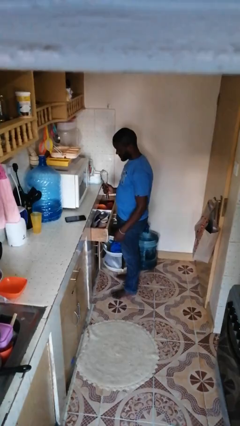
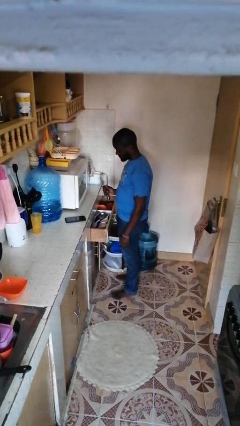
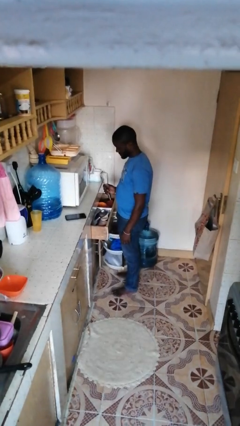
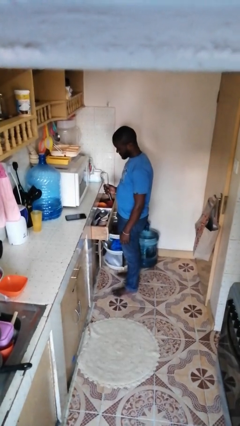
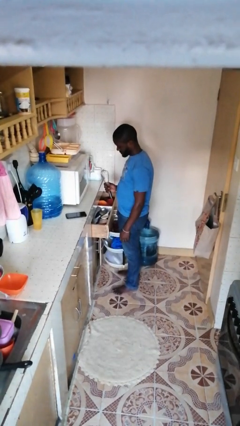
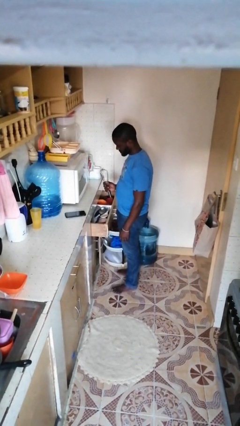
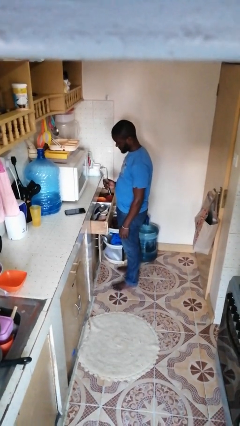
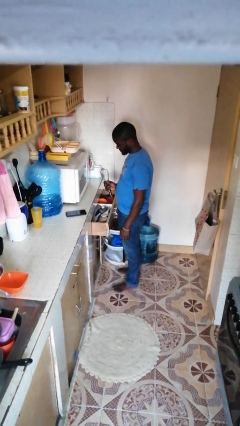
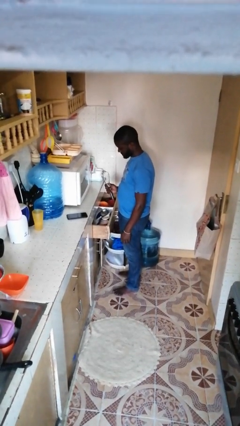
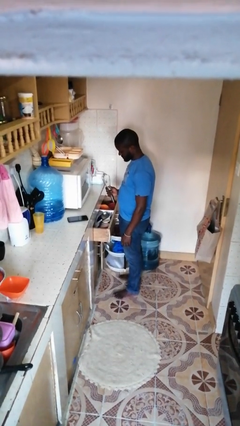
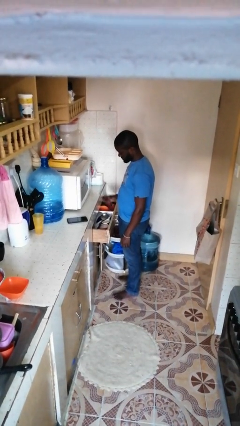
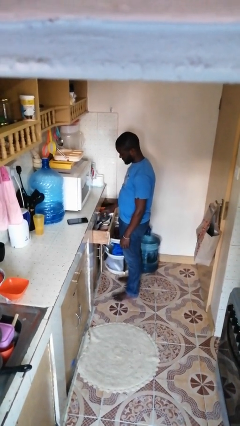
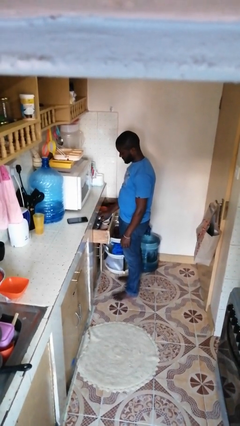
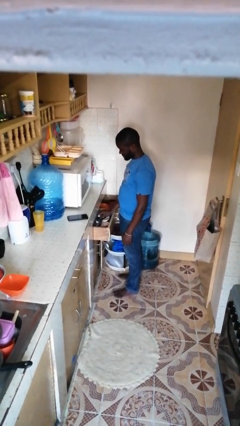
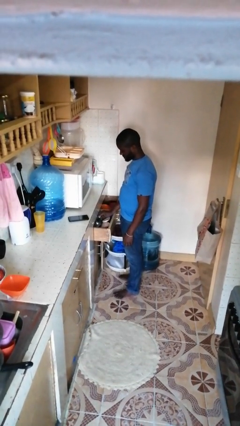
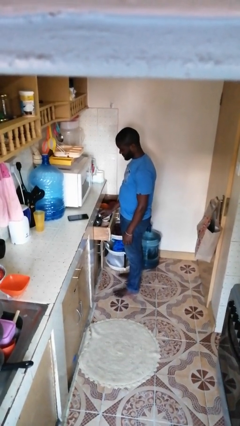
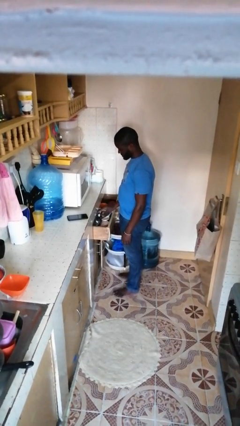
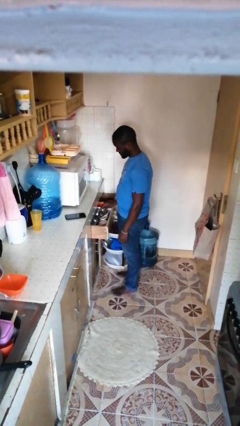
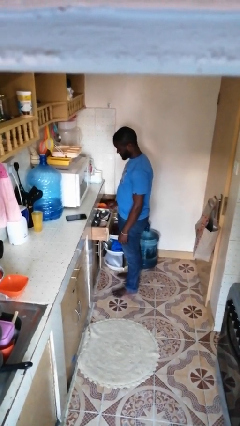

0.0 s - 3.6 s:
person puts object into kitchen drawer

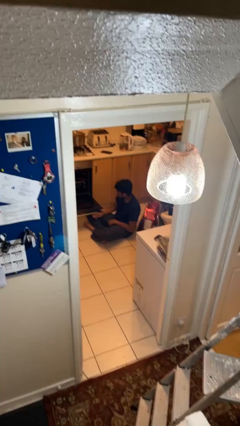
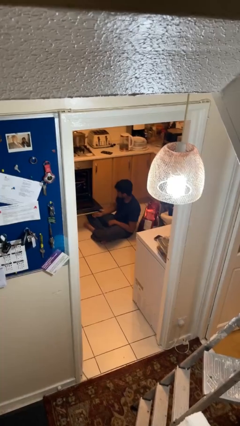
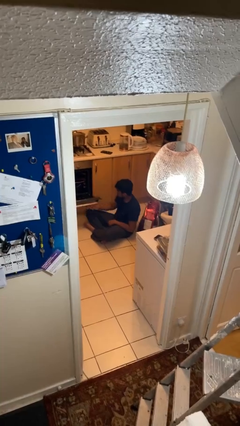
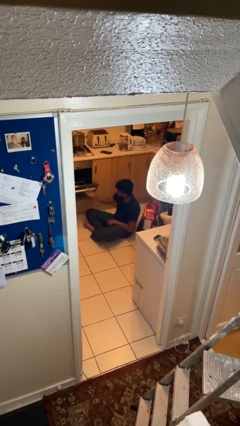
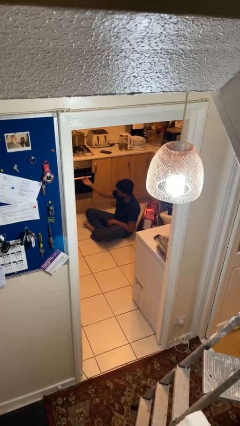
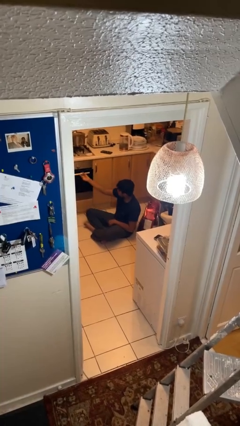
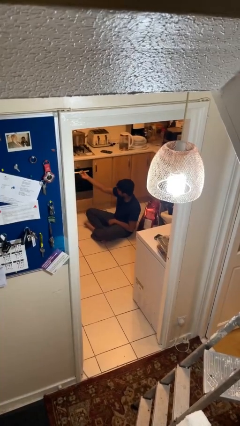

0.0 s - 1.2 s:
person closes oven door

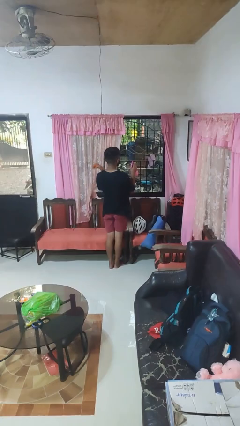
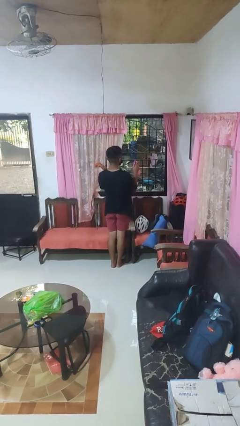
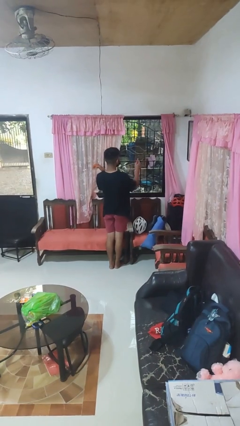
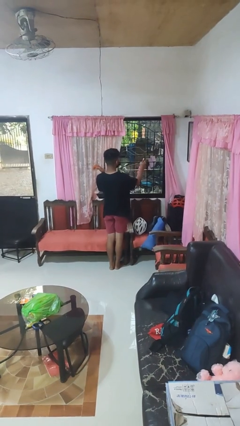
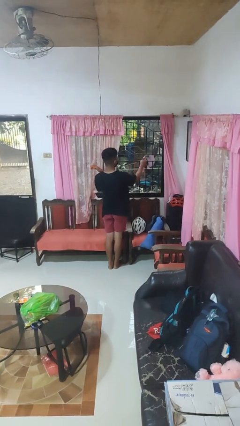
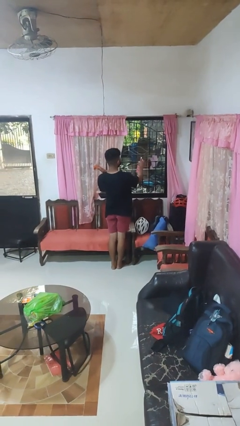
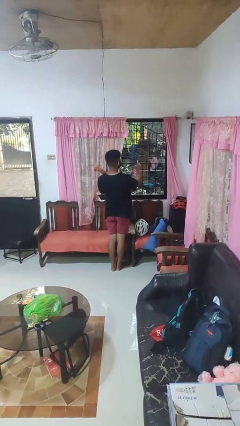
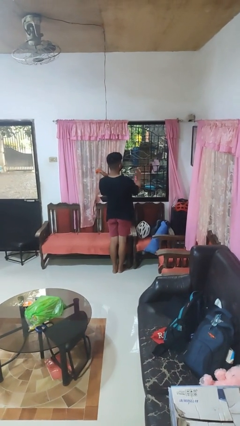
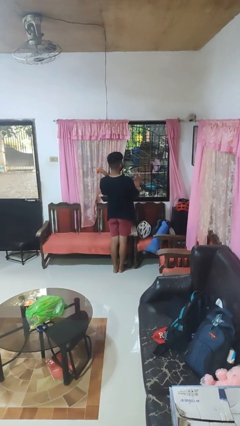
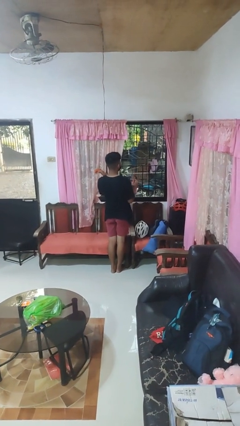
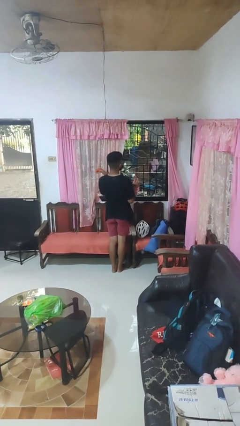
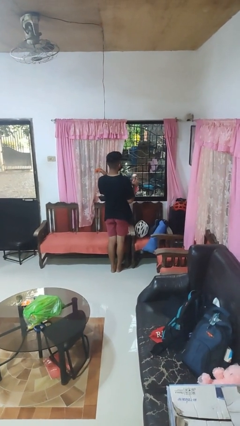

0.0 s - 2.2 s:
person sprays from bottle

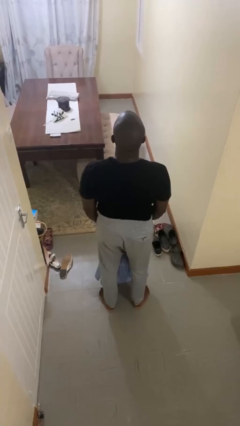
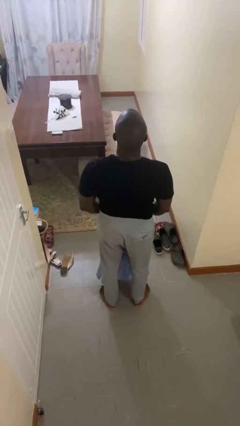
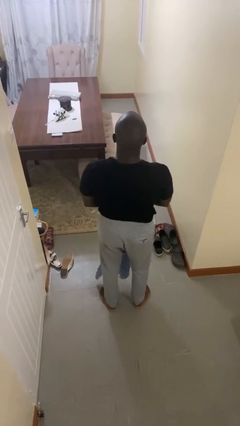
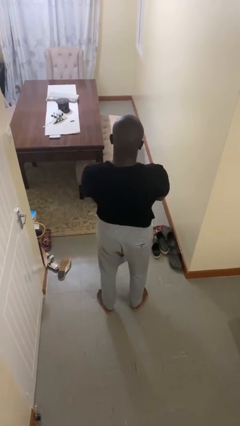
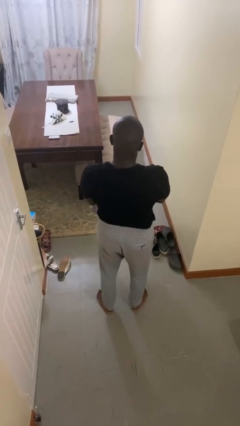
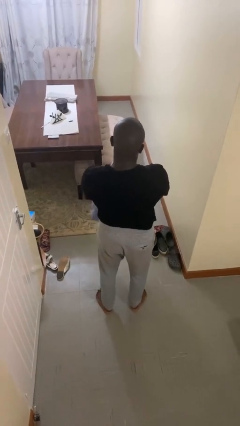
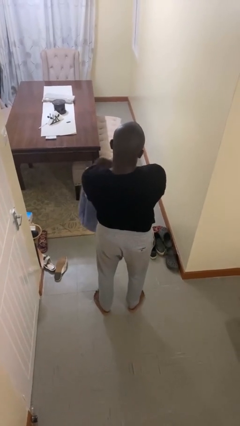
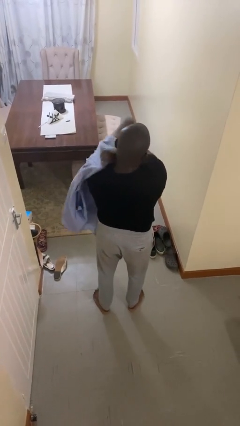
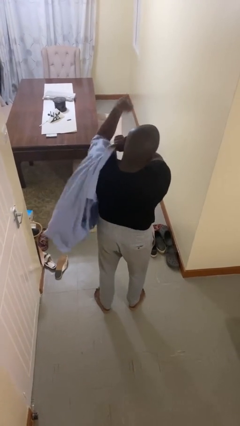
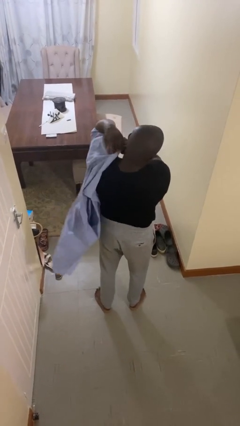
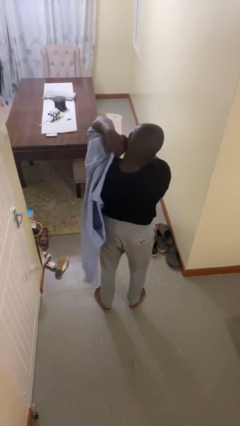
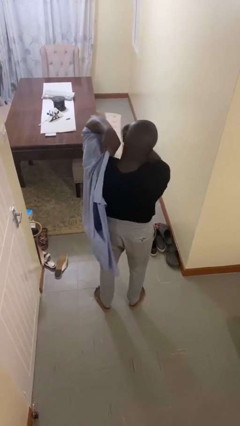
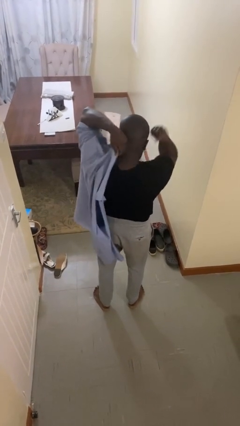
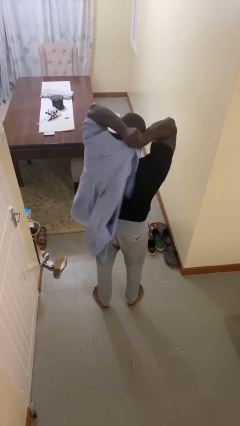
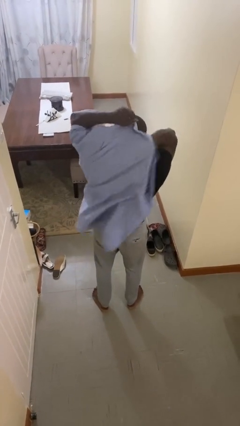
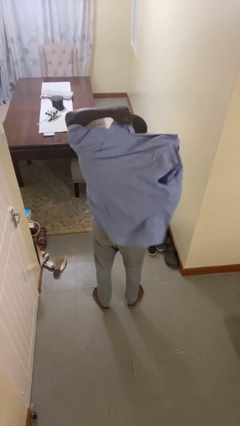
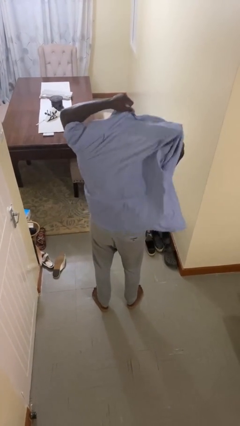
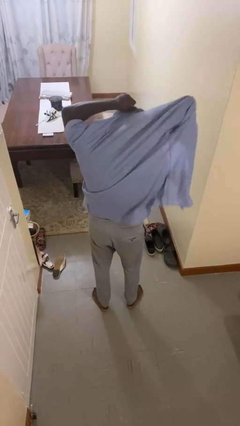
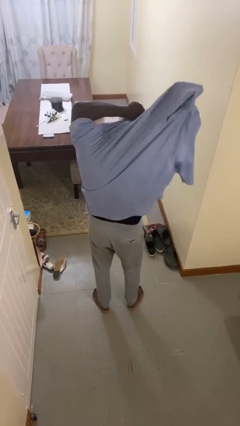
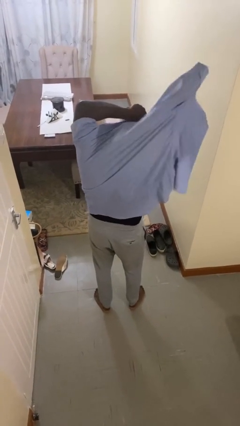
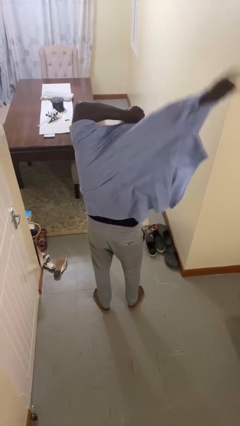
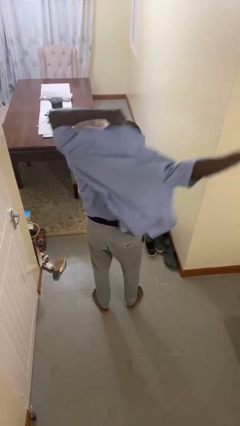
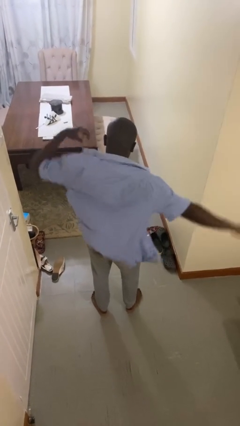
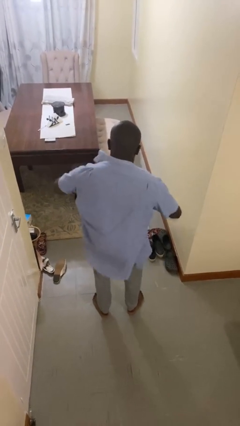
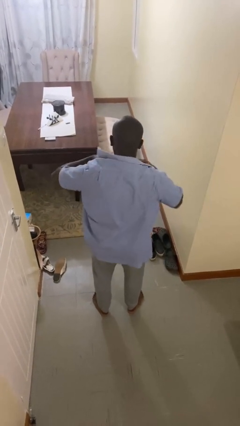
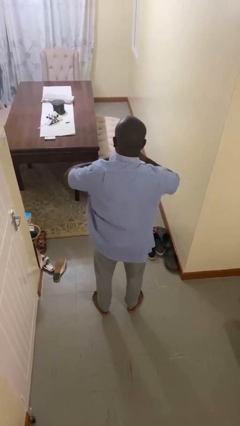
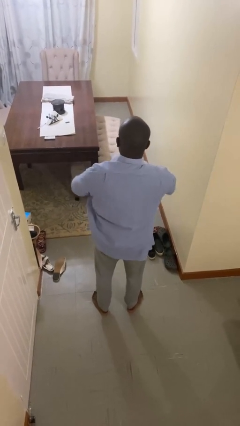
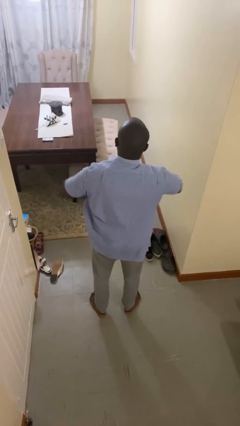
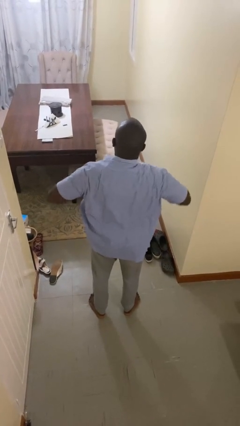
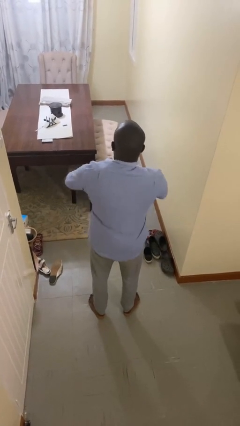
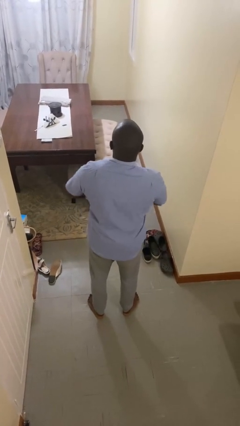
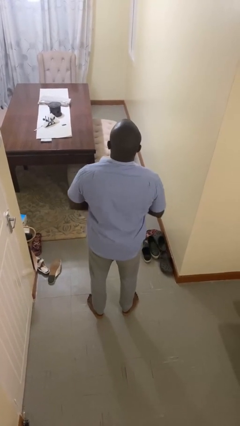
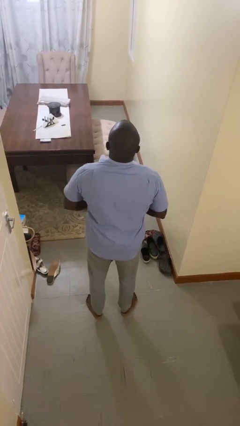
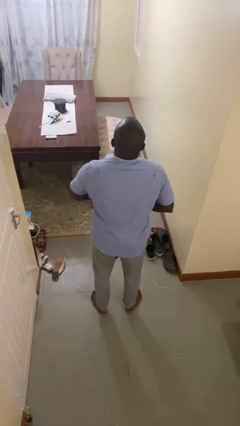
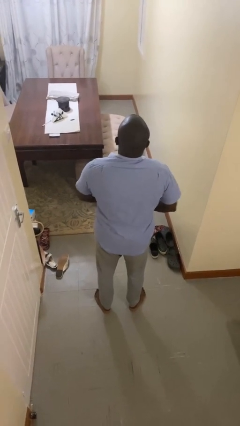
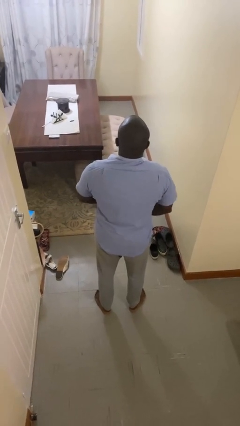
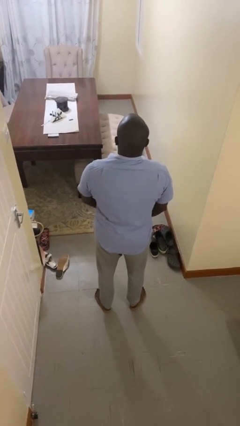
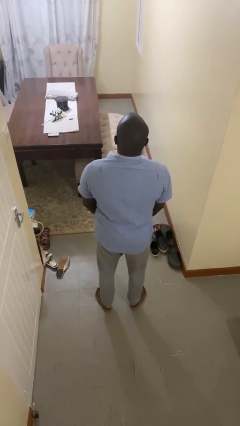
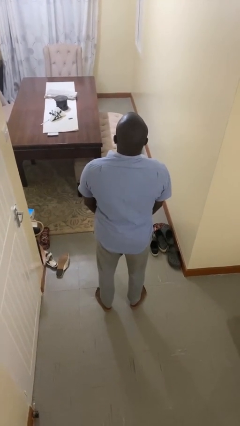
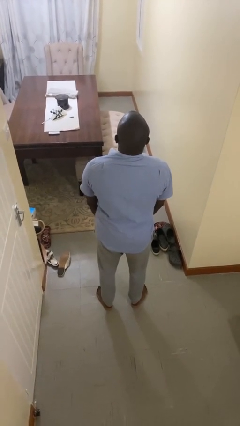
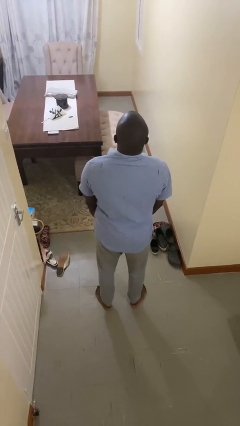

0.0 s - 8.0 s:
person puts on shirt

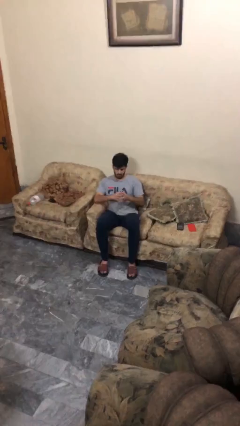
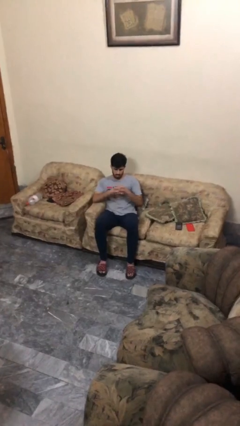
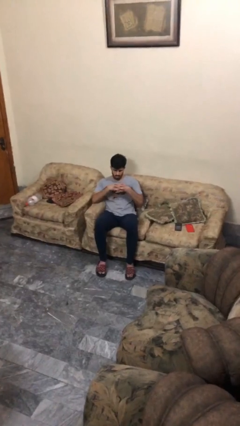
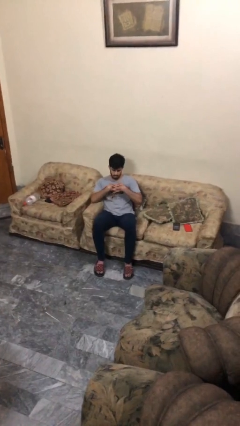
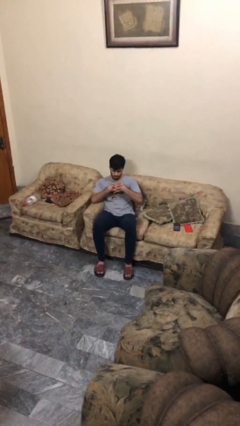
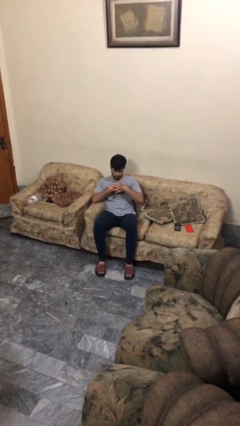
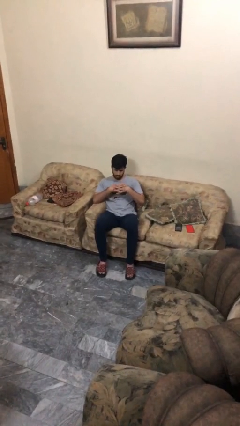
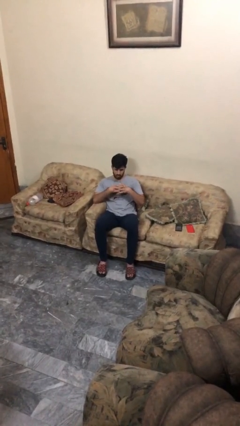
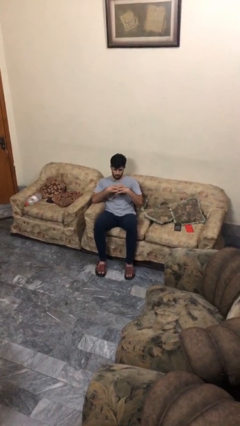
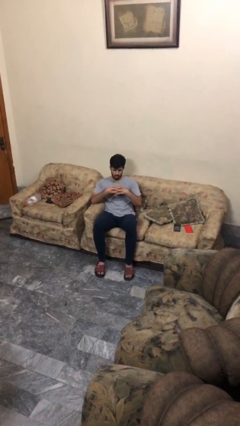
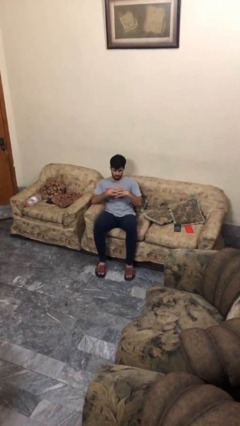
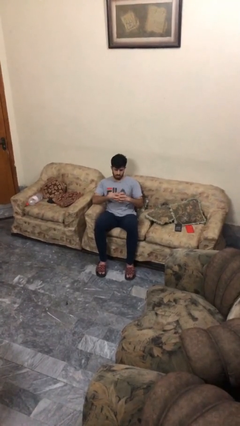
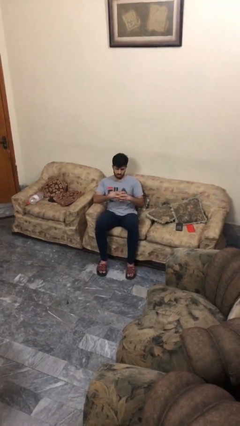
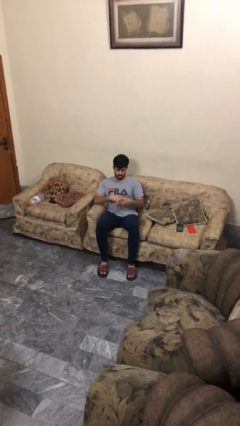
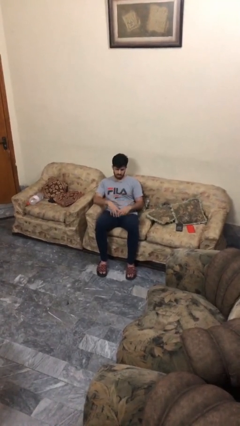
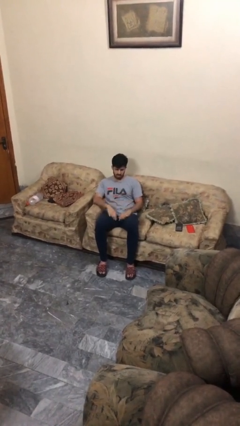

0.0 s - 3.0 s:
person cracks knuckles
